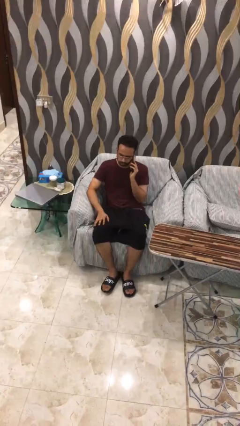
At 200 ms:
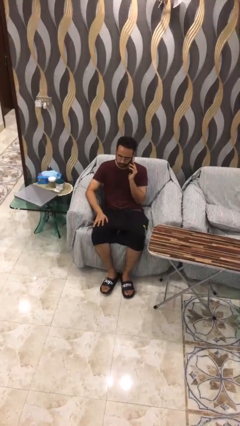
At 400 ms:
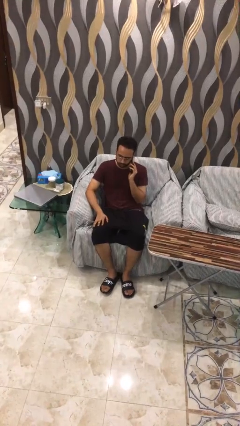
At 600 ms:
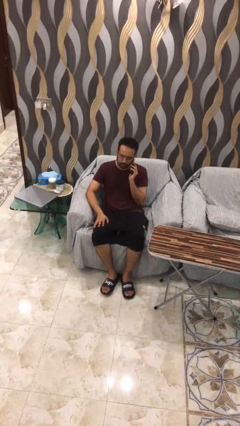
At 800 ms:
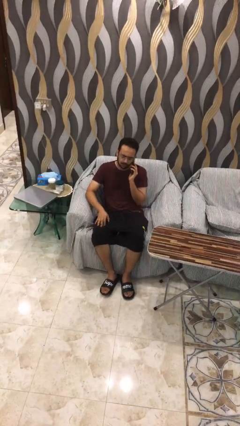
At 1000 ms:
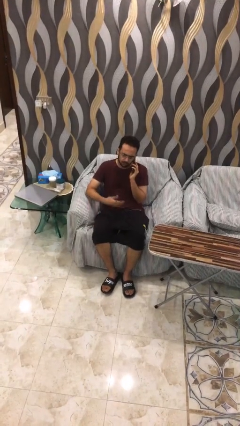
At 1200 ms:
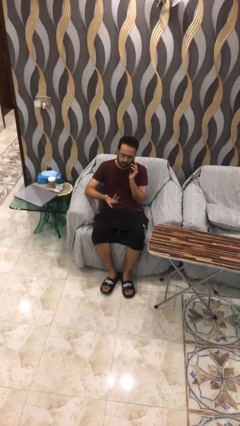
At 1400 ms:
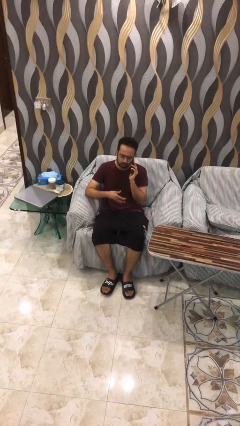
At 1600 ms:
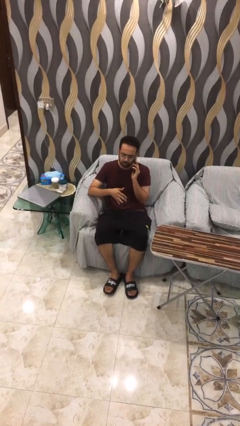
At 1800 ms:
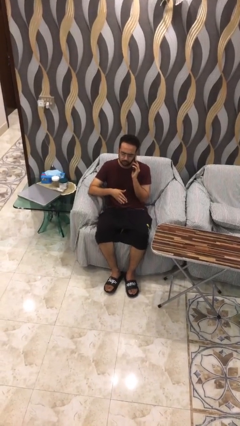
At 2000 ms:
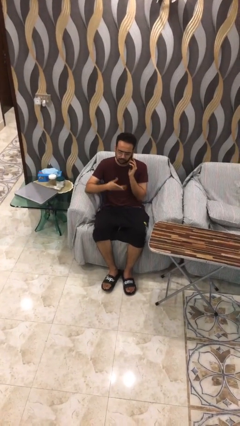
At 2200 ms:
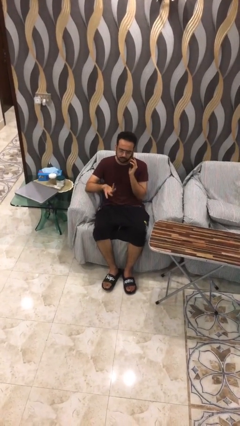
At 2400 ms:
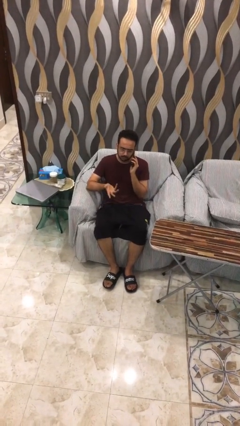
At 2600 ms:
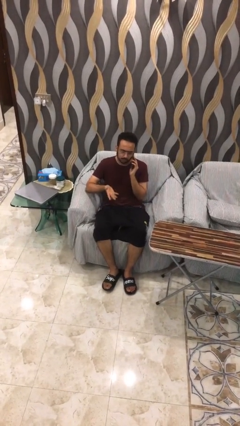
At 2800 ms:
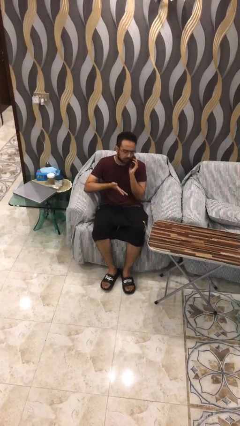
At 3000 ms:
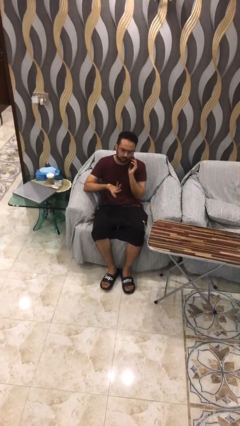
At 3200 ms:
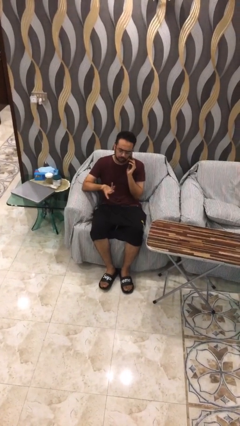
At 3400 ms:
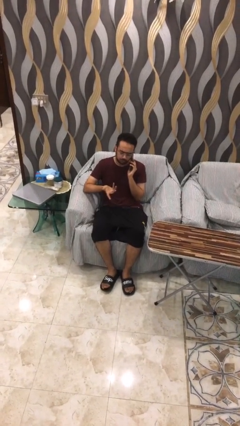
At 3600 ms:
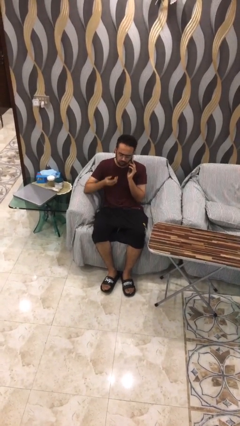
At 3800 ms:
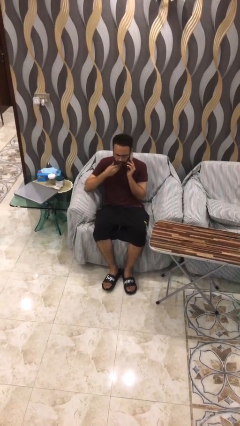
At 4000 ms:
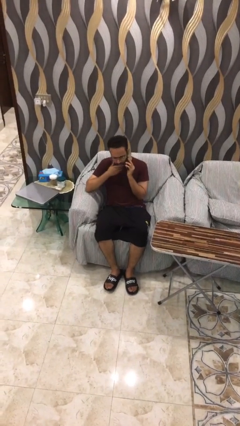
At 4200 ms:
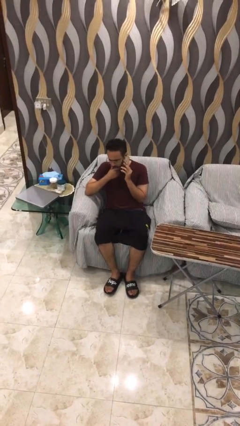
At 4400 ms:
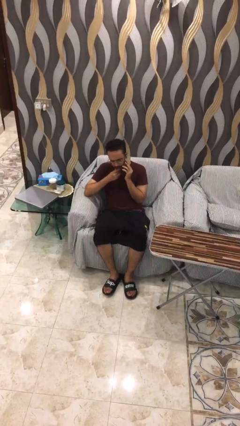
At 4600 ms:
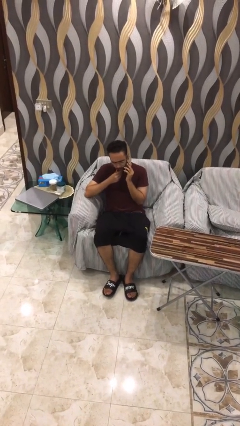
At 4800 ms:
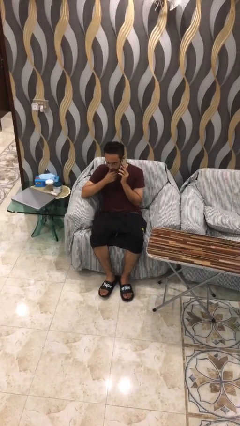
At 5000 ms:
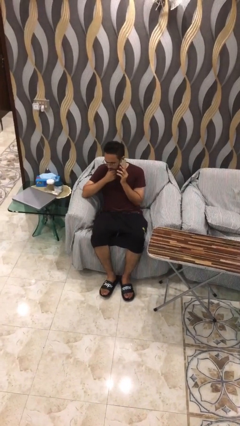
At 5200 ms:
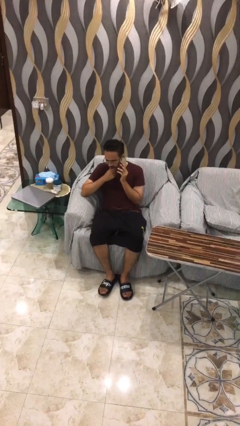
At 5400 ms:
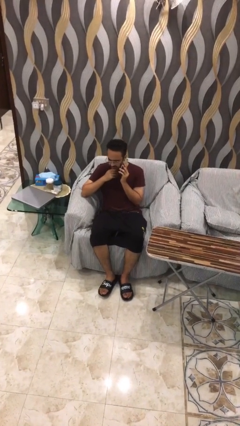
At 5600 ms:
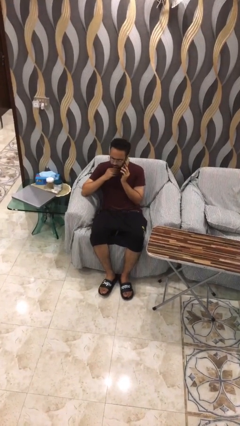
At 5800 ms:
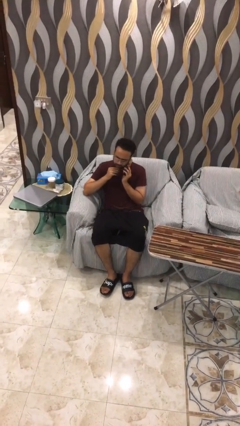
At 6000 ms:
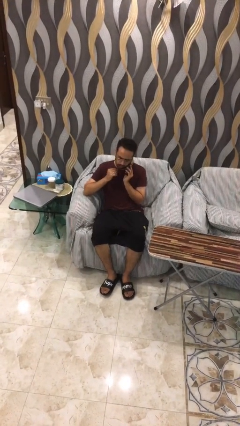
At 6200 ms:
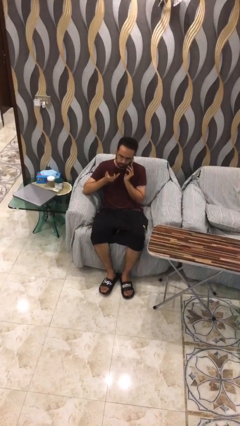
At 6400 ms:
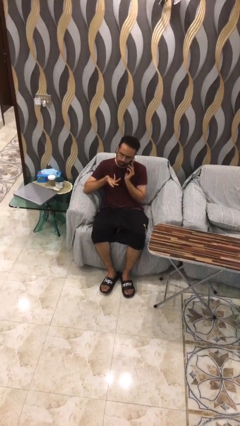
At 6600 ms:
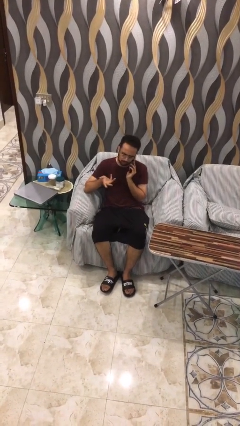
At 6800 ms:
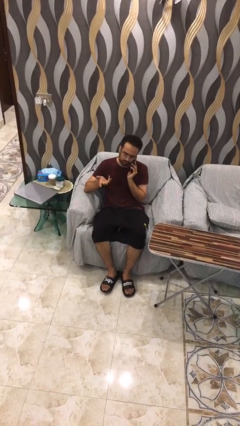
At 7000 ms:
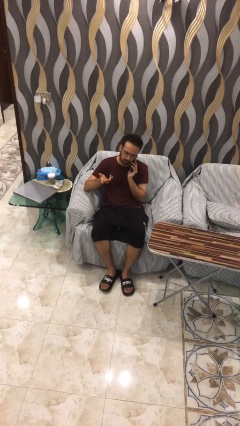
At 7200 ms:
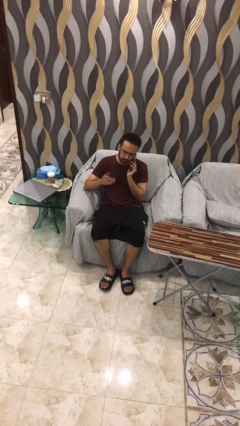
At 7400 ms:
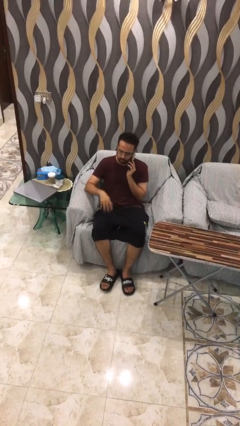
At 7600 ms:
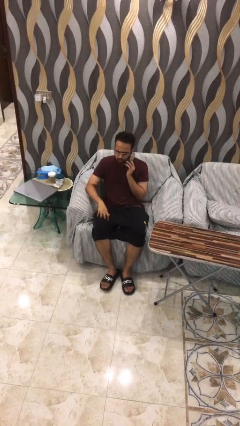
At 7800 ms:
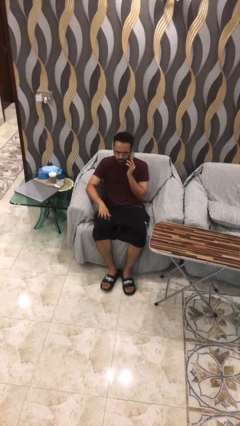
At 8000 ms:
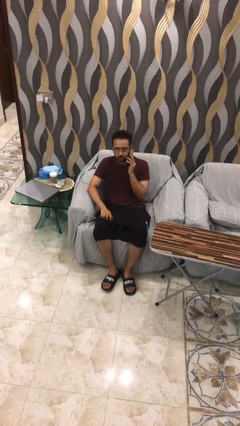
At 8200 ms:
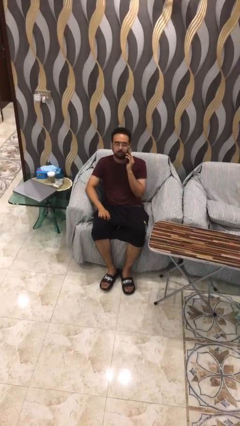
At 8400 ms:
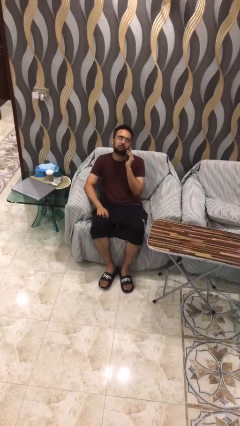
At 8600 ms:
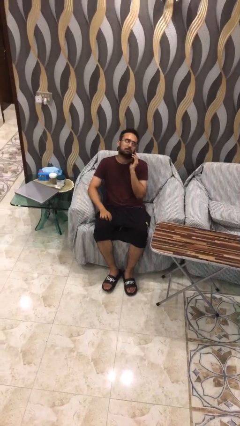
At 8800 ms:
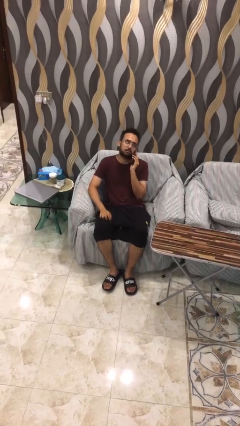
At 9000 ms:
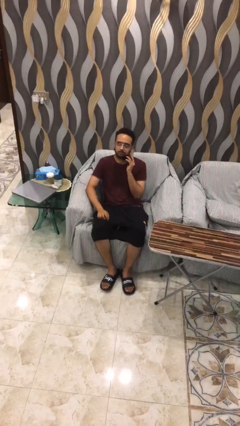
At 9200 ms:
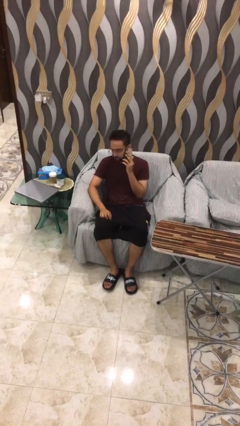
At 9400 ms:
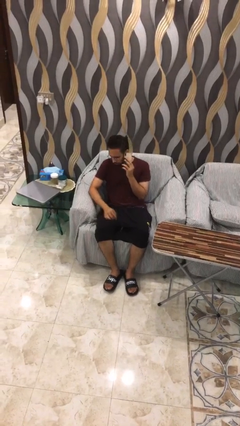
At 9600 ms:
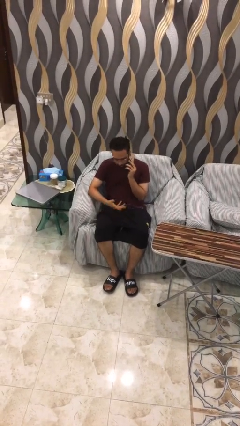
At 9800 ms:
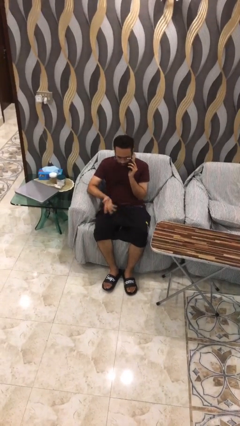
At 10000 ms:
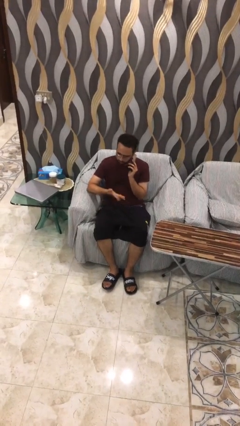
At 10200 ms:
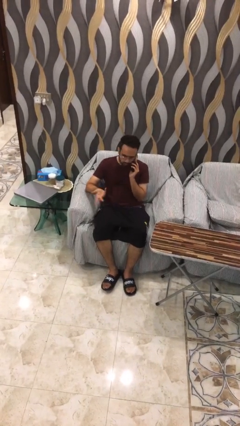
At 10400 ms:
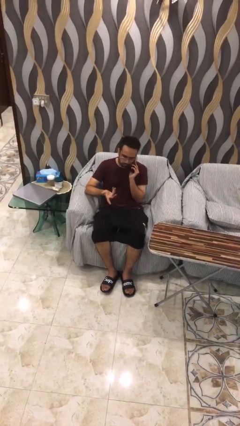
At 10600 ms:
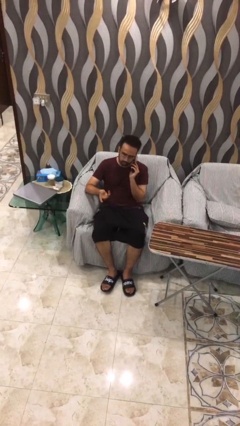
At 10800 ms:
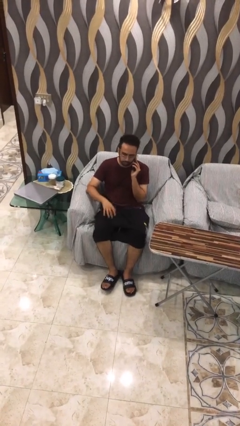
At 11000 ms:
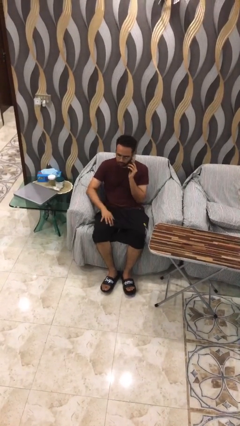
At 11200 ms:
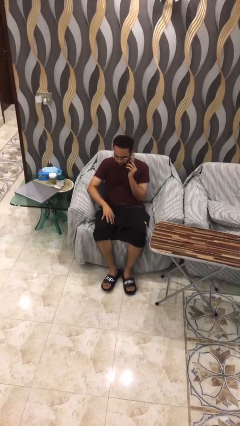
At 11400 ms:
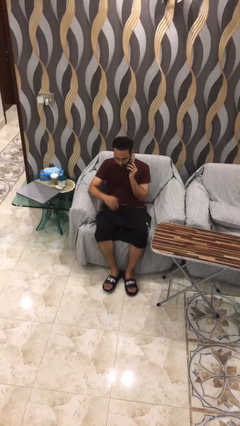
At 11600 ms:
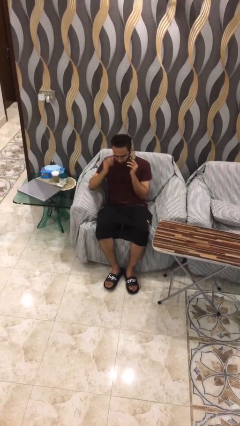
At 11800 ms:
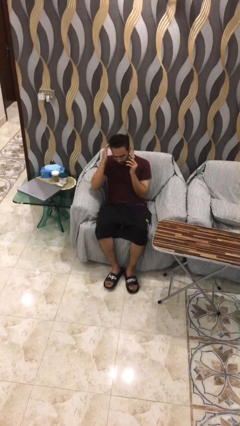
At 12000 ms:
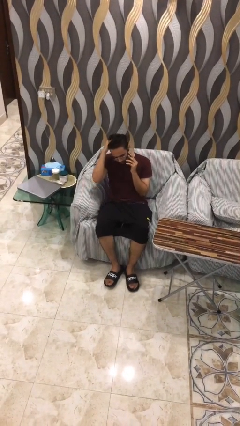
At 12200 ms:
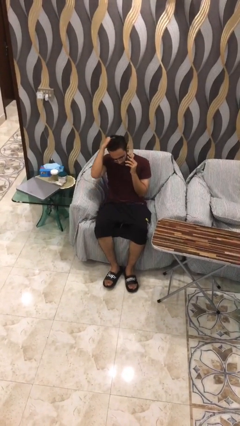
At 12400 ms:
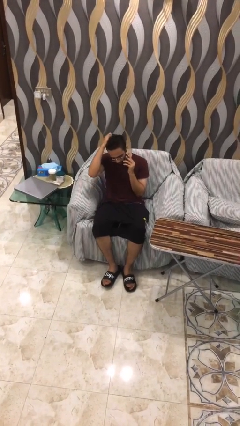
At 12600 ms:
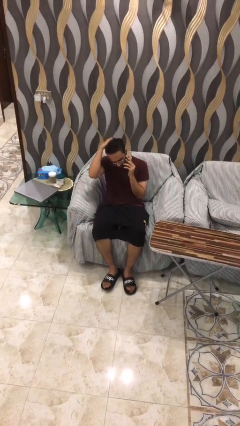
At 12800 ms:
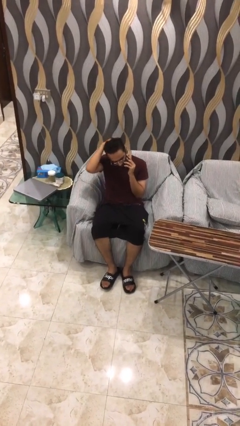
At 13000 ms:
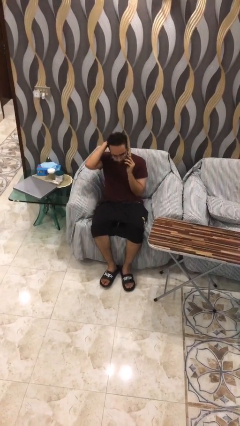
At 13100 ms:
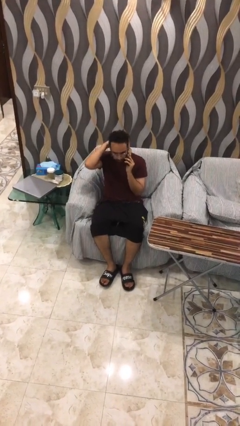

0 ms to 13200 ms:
person talks on phone

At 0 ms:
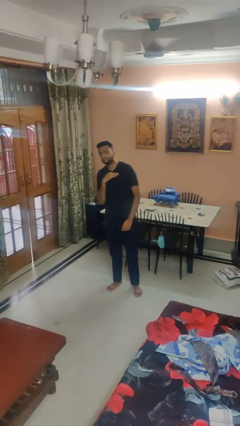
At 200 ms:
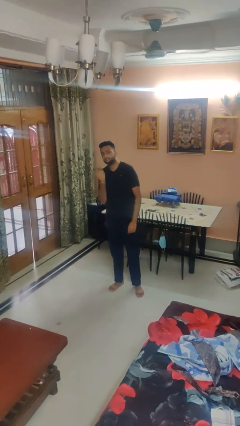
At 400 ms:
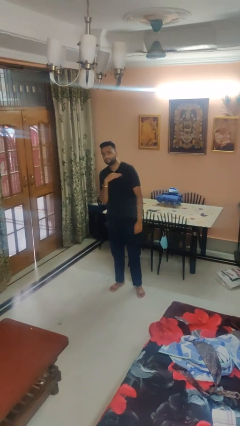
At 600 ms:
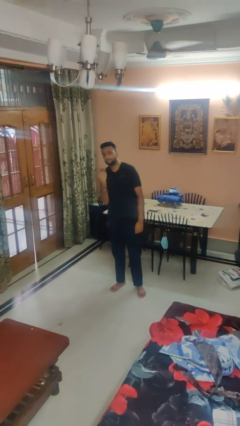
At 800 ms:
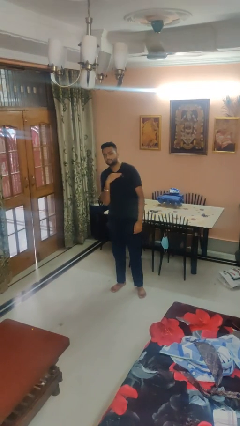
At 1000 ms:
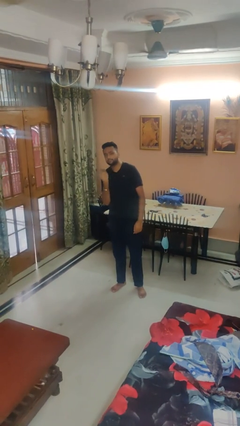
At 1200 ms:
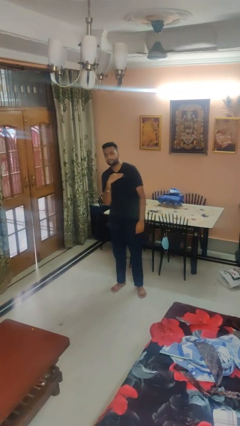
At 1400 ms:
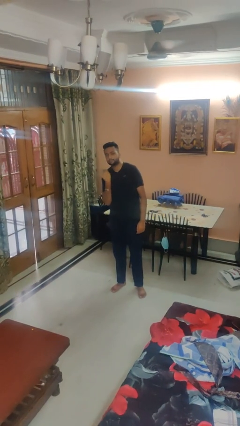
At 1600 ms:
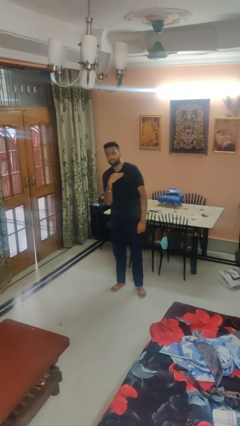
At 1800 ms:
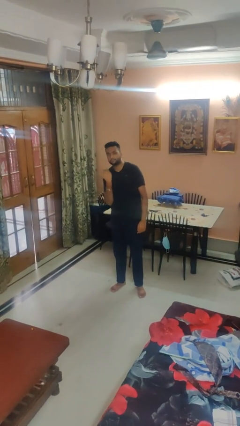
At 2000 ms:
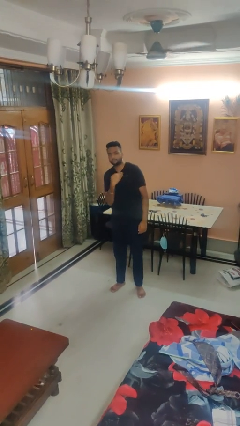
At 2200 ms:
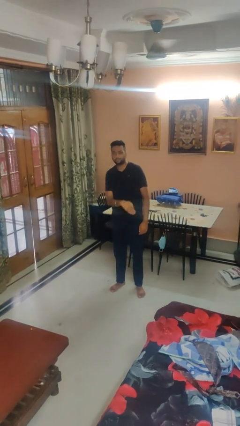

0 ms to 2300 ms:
person gestures cut

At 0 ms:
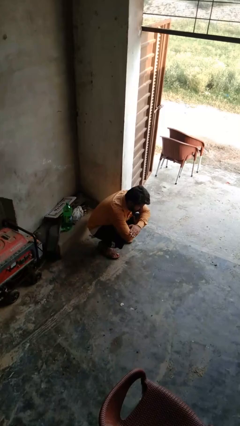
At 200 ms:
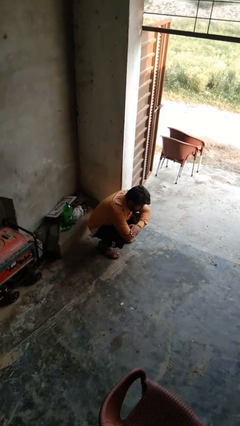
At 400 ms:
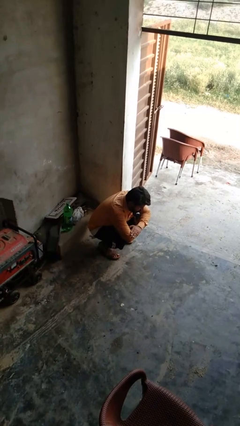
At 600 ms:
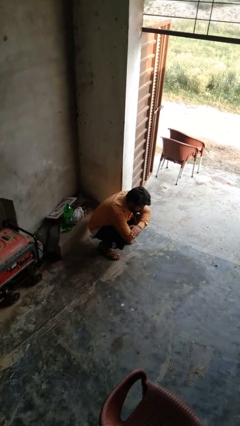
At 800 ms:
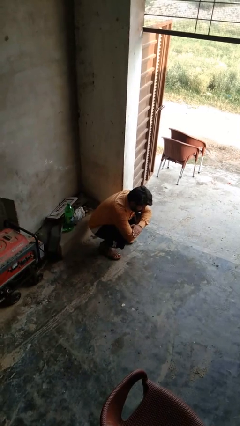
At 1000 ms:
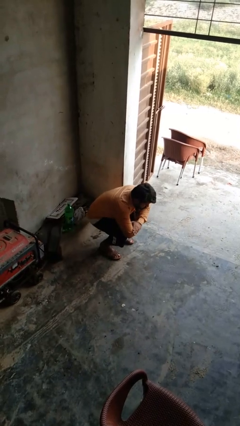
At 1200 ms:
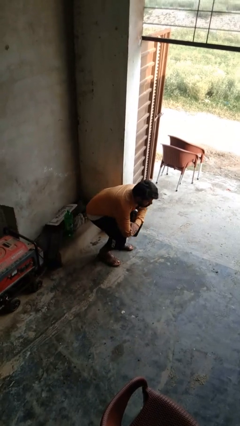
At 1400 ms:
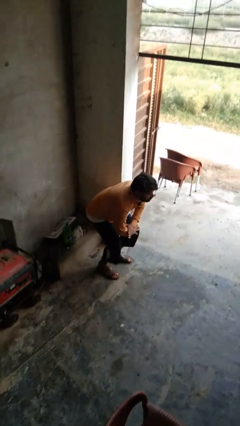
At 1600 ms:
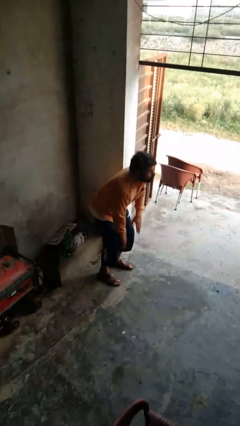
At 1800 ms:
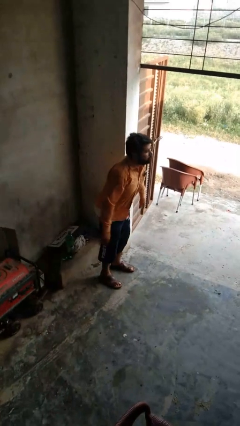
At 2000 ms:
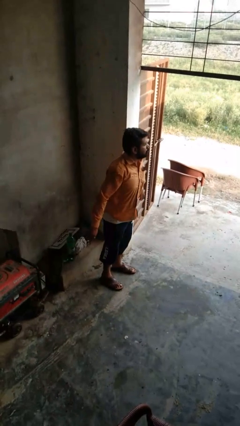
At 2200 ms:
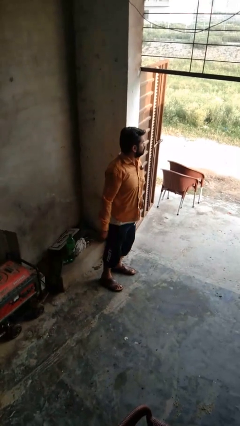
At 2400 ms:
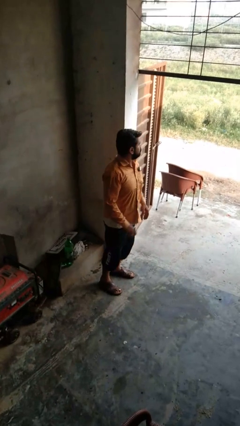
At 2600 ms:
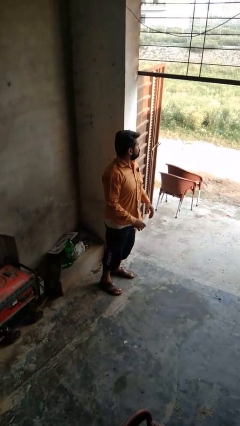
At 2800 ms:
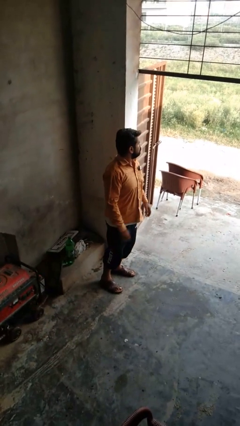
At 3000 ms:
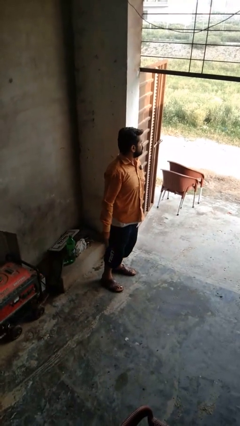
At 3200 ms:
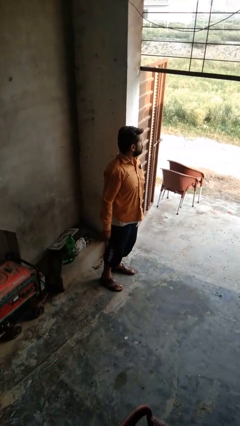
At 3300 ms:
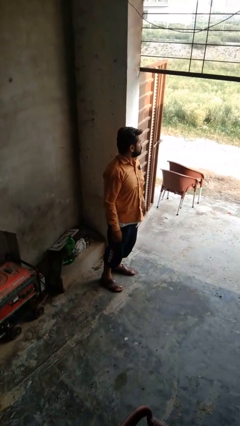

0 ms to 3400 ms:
person stands up
